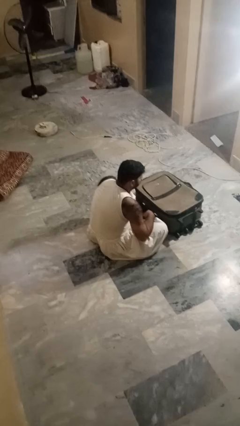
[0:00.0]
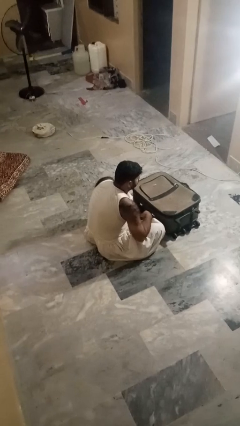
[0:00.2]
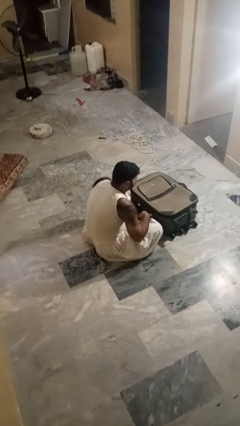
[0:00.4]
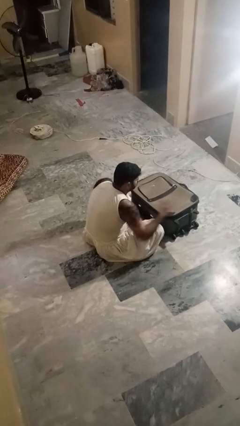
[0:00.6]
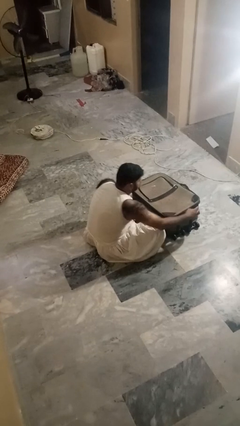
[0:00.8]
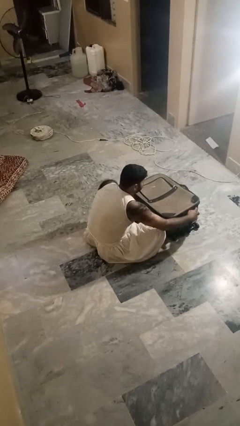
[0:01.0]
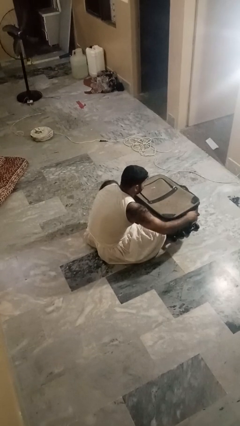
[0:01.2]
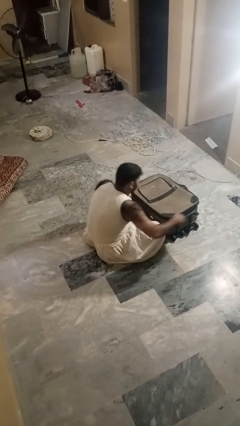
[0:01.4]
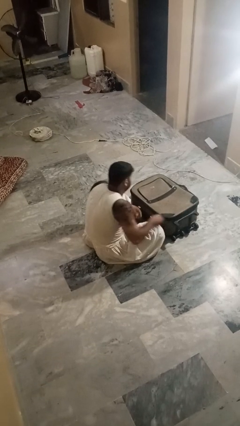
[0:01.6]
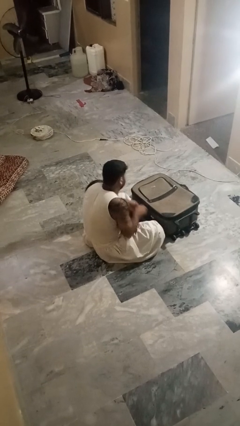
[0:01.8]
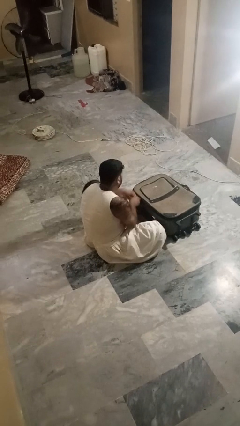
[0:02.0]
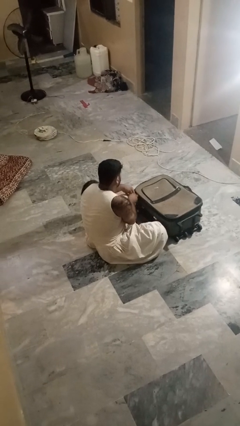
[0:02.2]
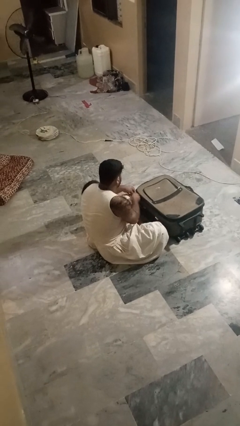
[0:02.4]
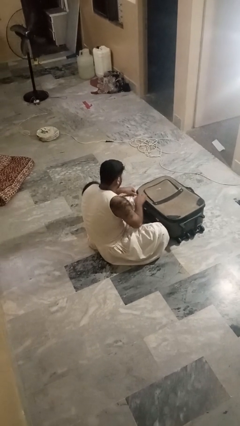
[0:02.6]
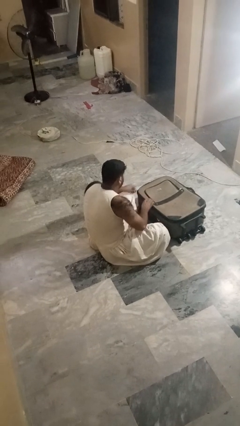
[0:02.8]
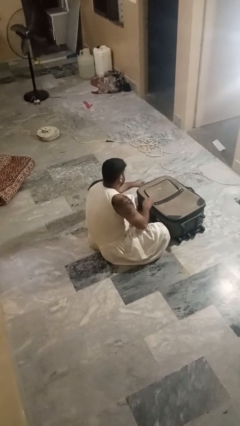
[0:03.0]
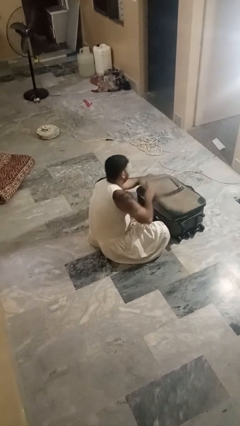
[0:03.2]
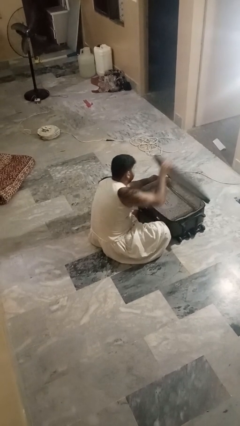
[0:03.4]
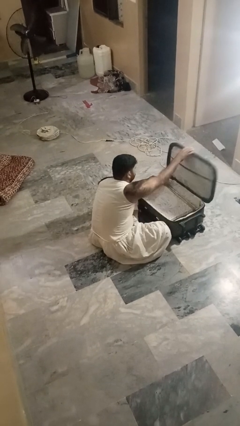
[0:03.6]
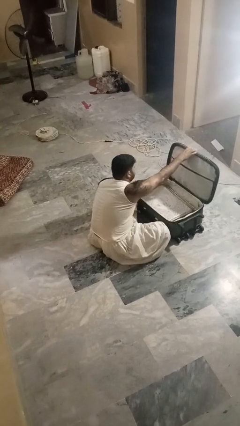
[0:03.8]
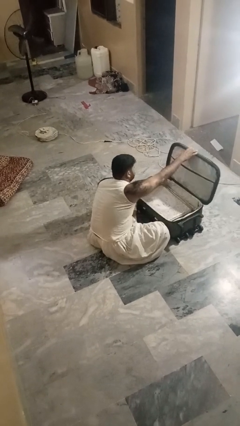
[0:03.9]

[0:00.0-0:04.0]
person opens suitcase

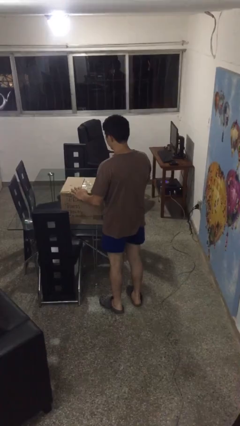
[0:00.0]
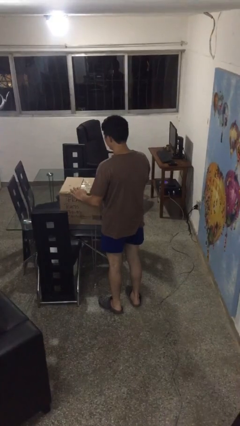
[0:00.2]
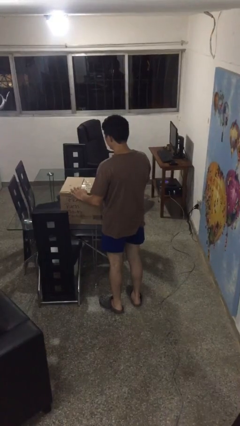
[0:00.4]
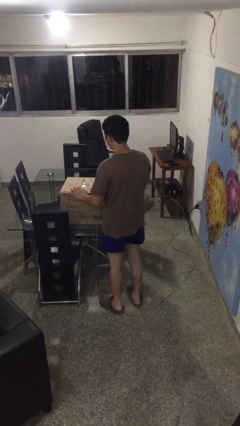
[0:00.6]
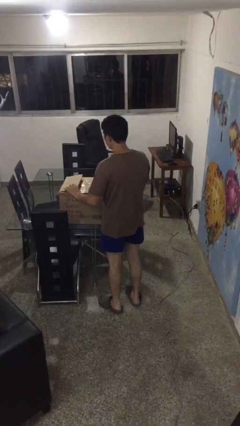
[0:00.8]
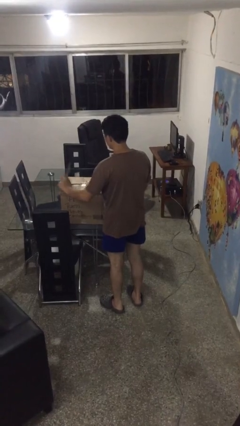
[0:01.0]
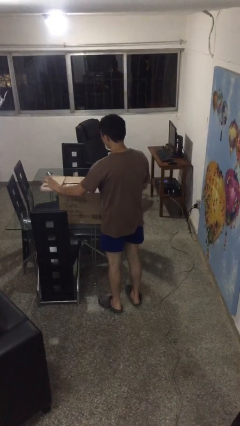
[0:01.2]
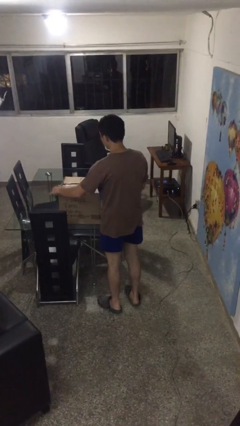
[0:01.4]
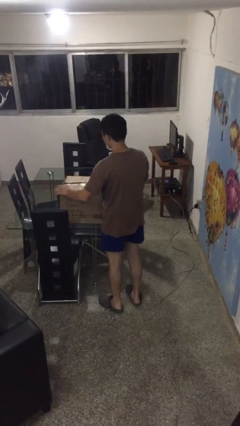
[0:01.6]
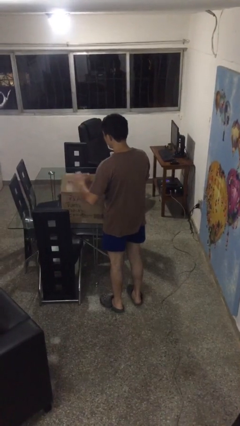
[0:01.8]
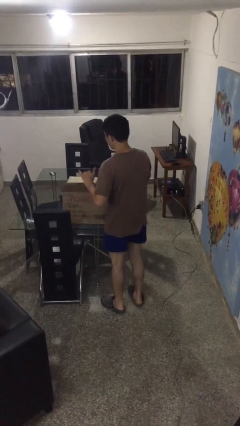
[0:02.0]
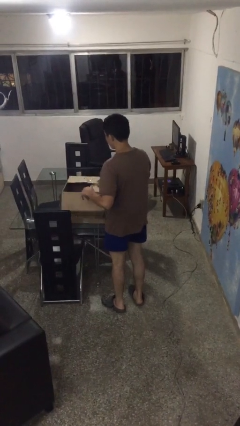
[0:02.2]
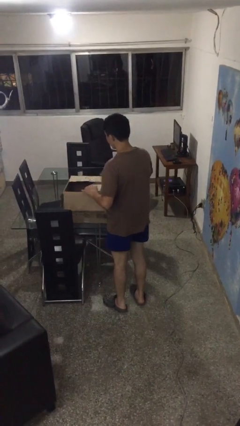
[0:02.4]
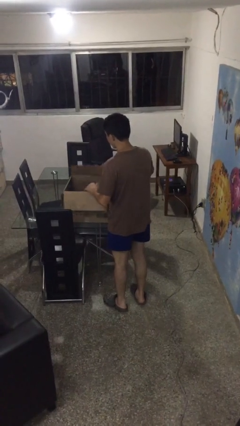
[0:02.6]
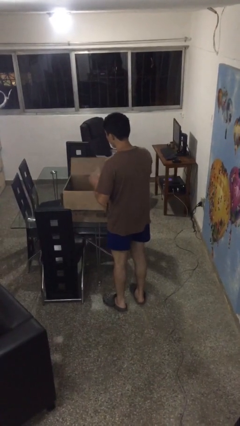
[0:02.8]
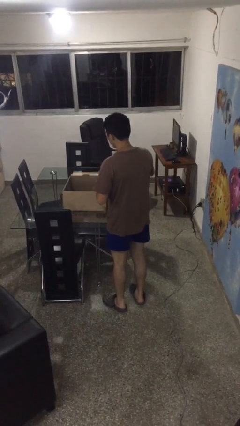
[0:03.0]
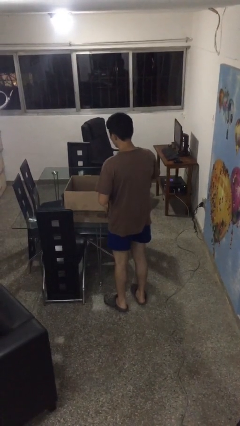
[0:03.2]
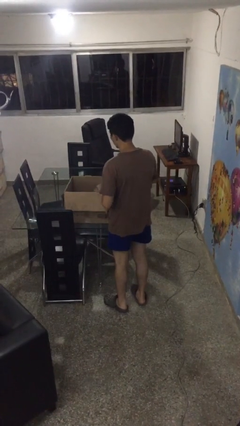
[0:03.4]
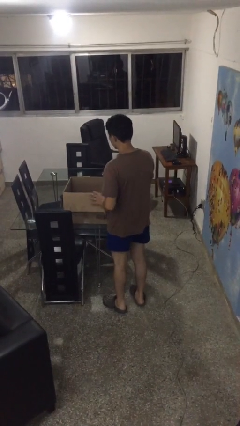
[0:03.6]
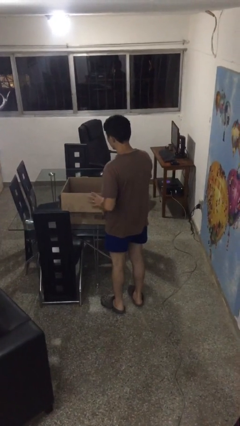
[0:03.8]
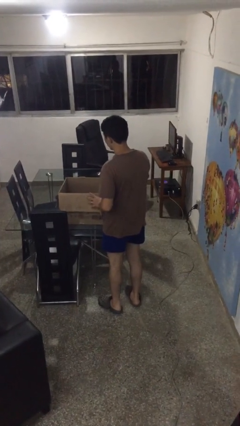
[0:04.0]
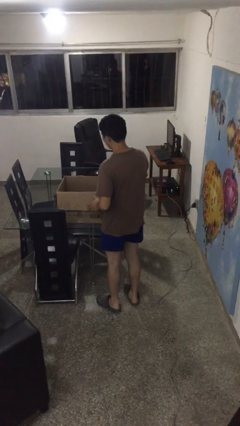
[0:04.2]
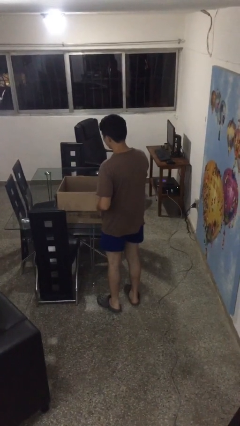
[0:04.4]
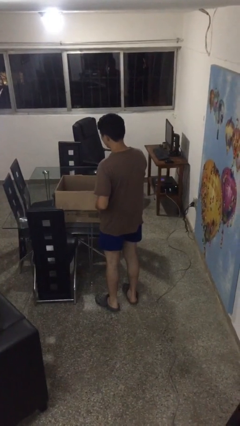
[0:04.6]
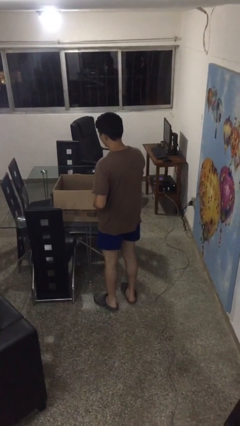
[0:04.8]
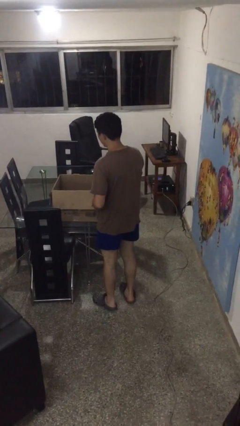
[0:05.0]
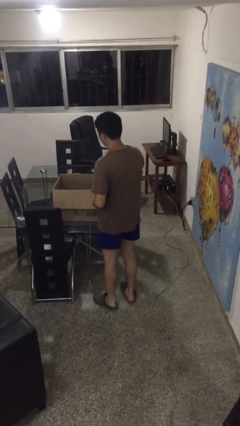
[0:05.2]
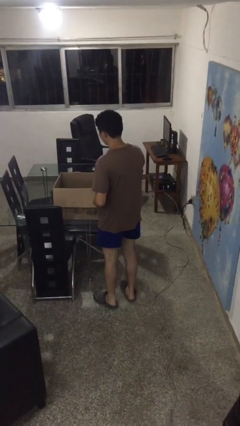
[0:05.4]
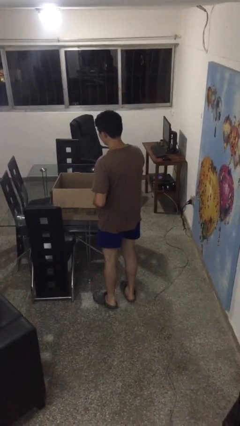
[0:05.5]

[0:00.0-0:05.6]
person opens box

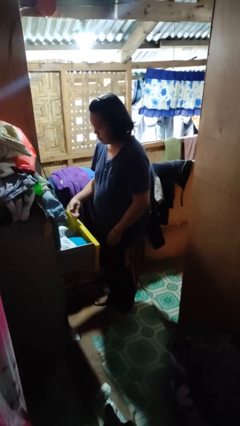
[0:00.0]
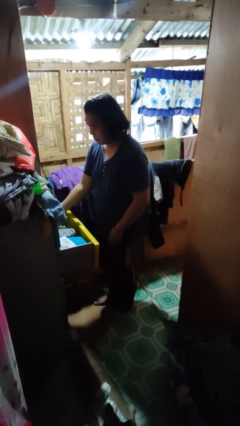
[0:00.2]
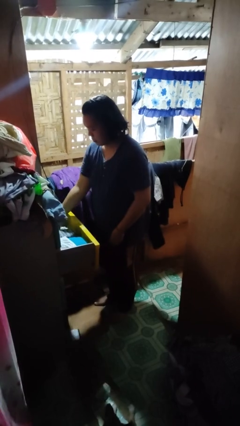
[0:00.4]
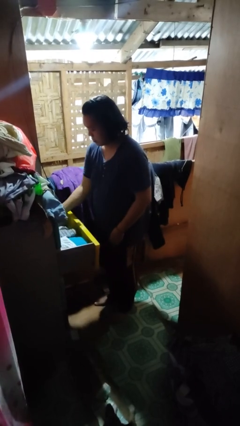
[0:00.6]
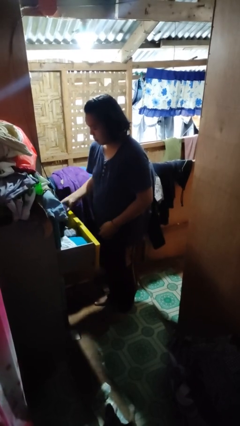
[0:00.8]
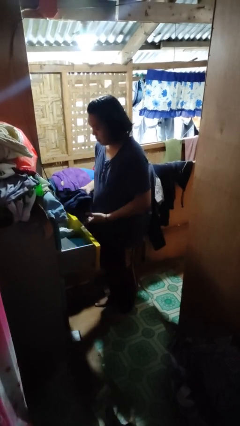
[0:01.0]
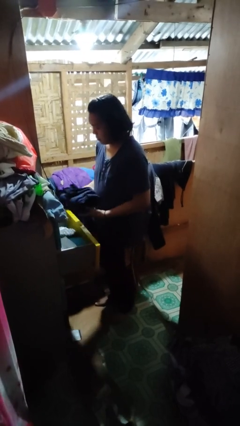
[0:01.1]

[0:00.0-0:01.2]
person takes clothes from dresser

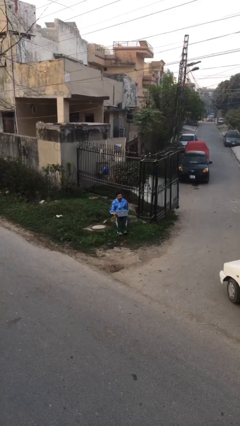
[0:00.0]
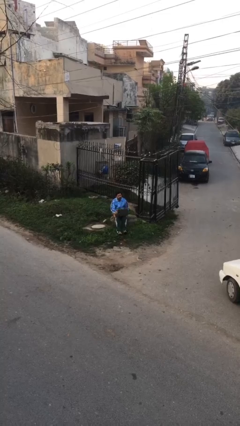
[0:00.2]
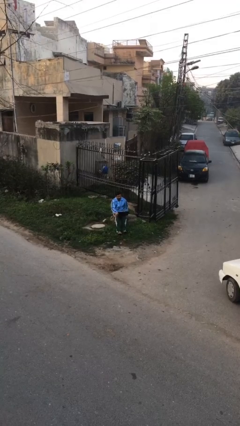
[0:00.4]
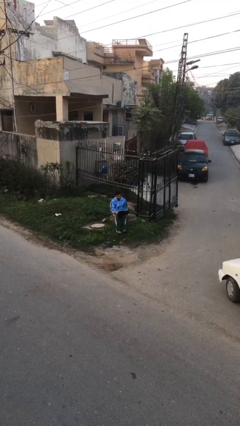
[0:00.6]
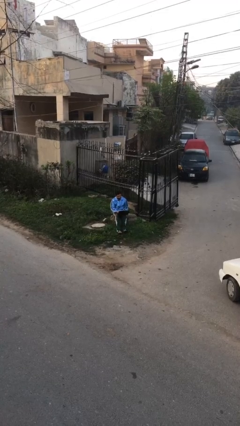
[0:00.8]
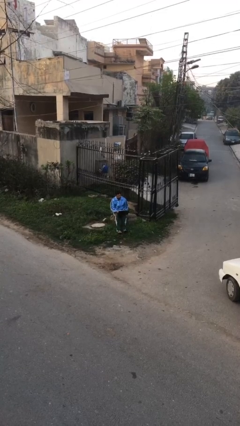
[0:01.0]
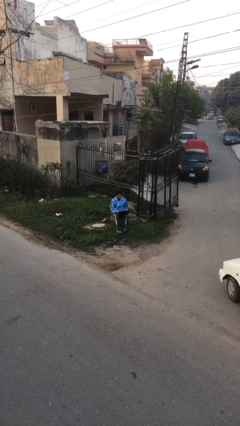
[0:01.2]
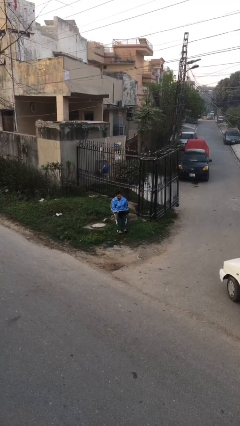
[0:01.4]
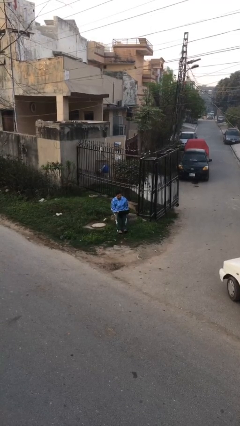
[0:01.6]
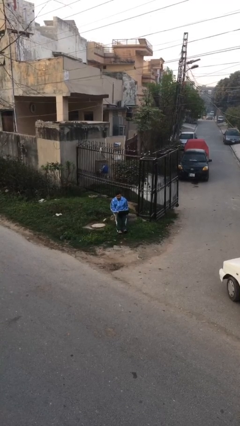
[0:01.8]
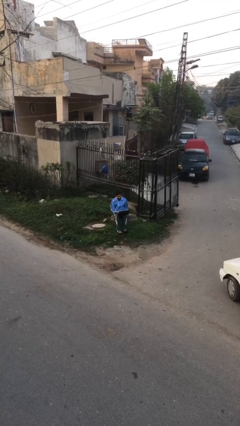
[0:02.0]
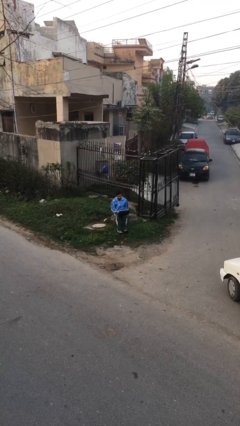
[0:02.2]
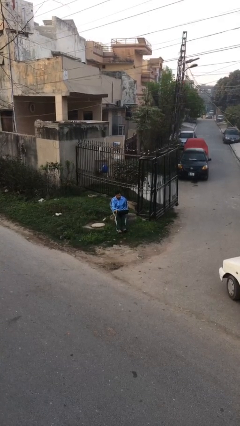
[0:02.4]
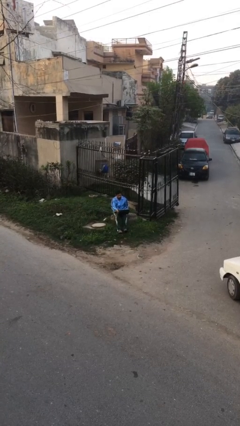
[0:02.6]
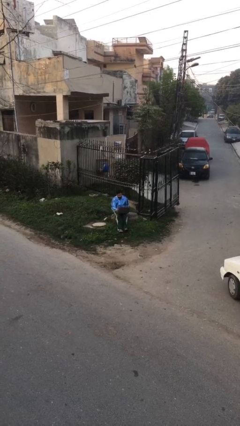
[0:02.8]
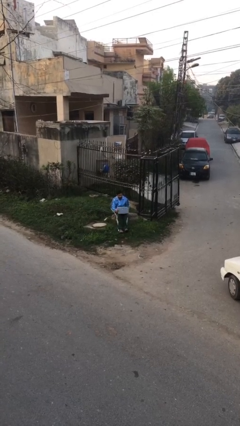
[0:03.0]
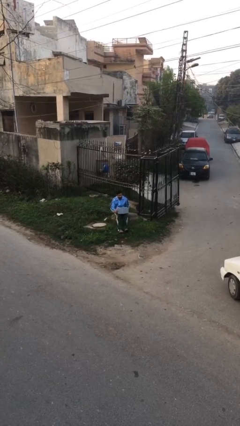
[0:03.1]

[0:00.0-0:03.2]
person interacts with laptop

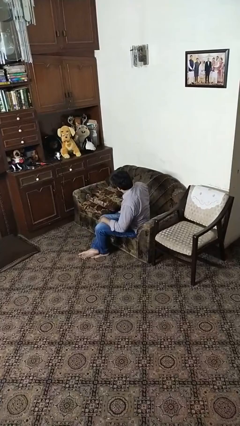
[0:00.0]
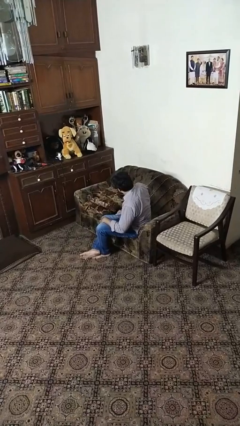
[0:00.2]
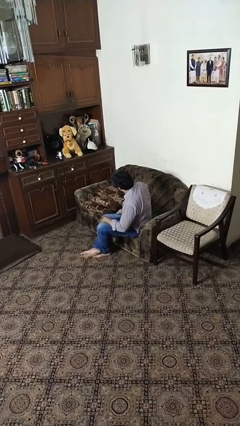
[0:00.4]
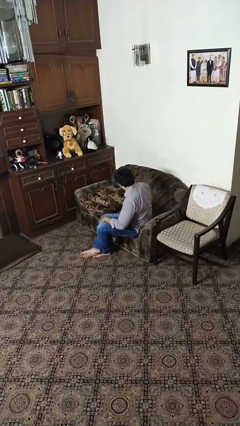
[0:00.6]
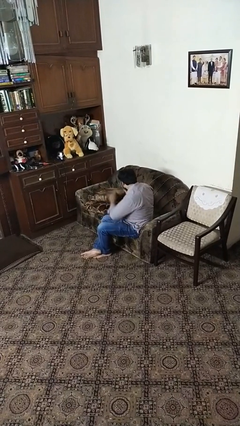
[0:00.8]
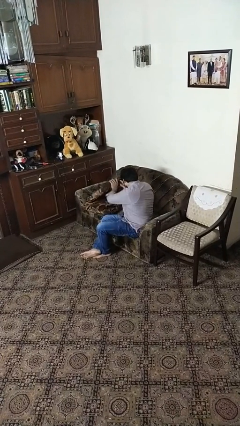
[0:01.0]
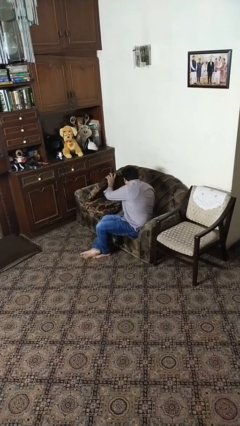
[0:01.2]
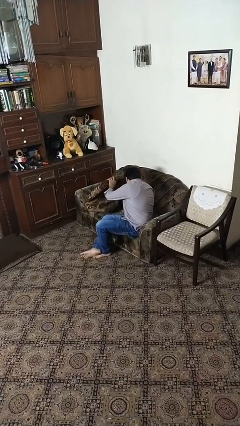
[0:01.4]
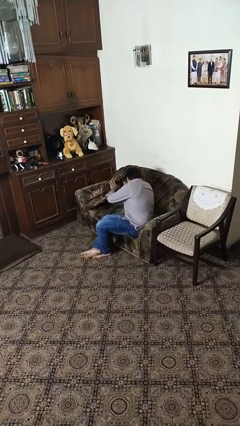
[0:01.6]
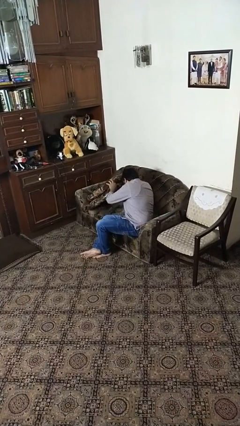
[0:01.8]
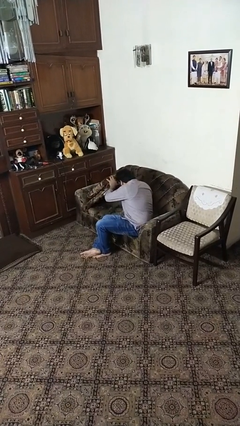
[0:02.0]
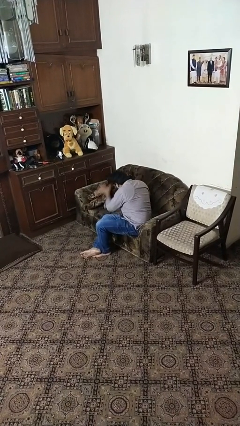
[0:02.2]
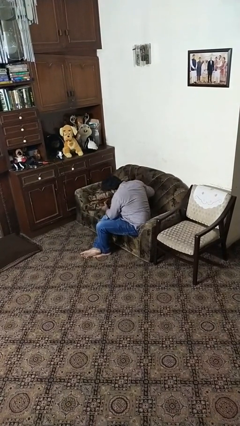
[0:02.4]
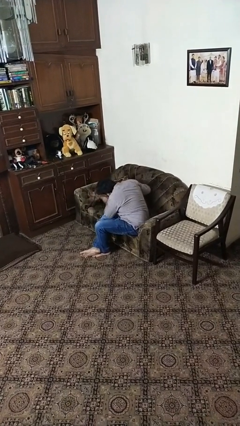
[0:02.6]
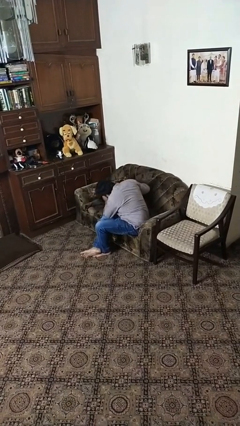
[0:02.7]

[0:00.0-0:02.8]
person searches in couch

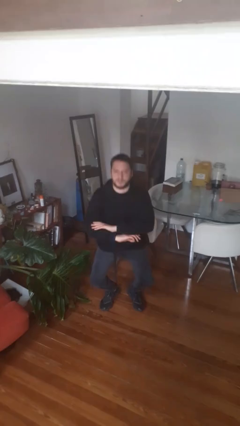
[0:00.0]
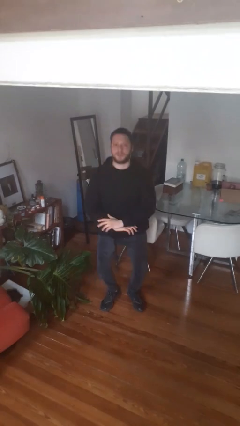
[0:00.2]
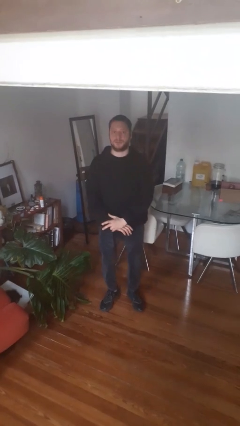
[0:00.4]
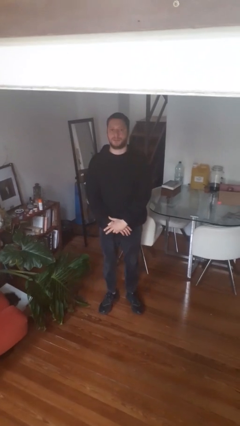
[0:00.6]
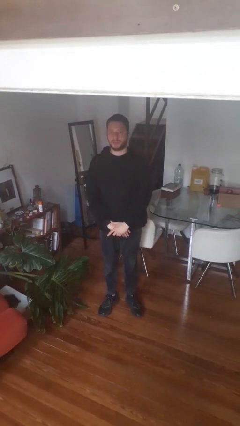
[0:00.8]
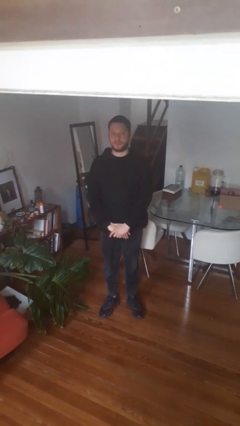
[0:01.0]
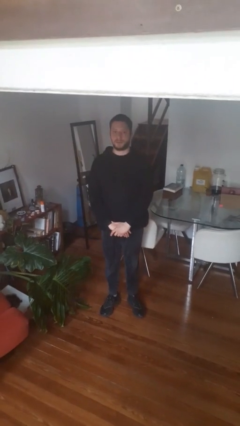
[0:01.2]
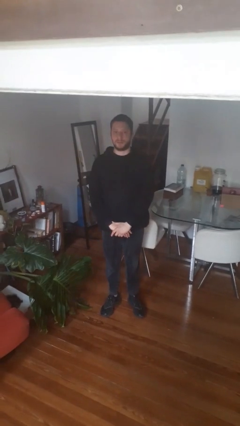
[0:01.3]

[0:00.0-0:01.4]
person stands up
